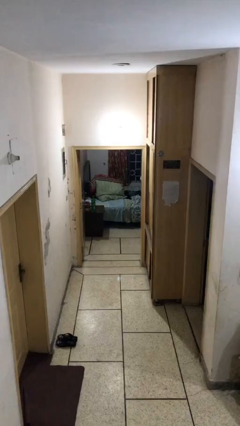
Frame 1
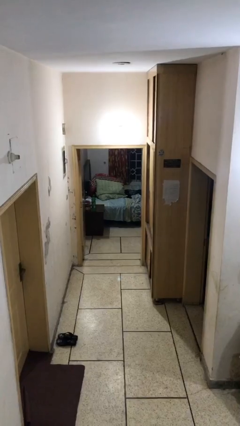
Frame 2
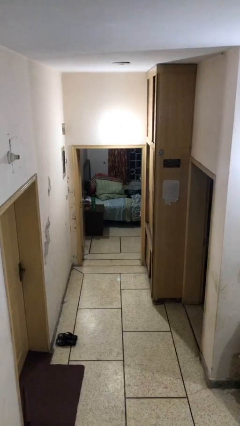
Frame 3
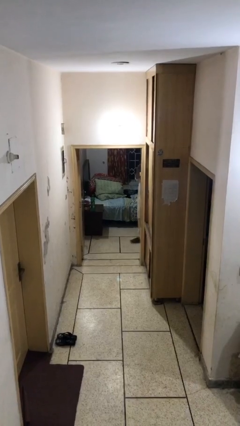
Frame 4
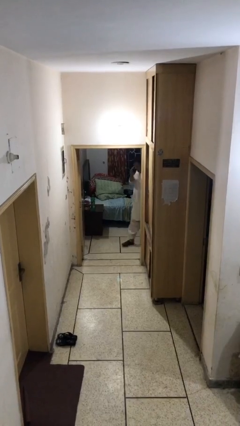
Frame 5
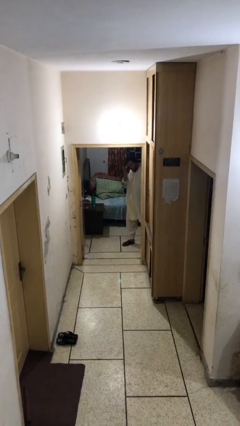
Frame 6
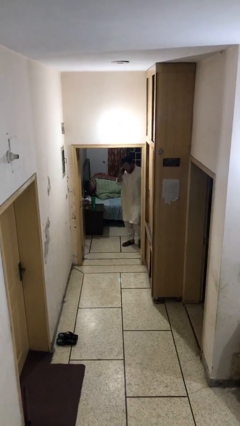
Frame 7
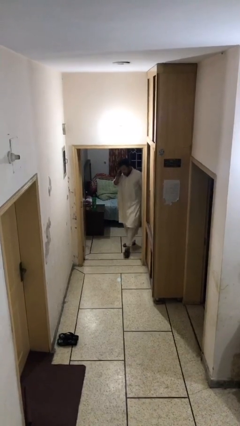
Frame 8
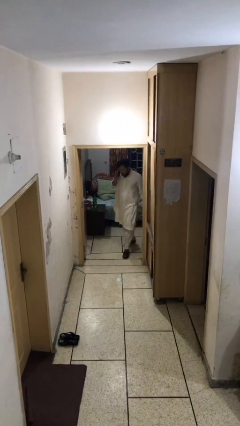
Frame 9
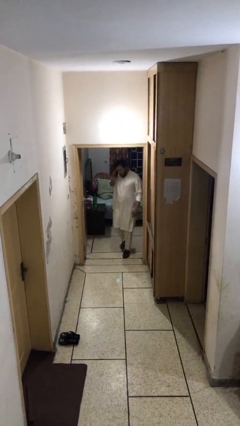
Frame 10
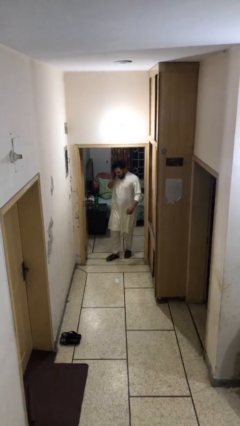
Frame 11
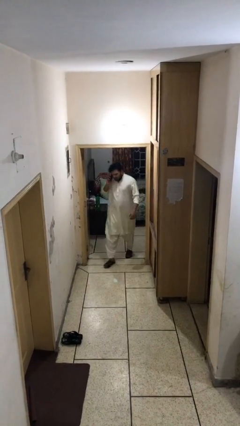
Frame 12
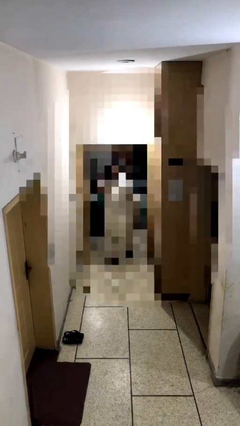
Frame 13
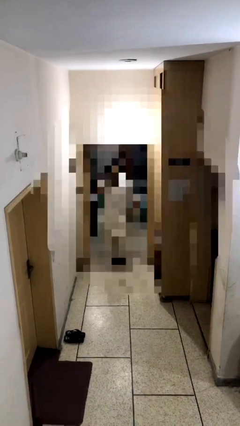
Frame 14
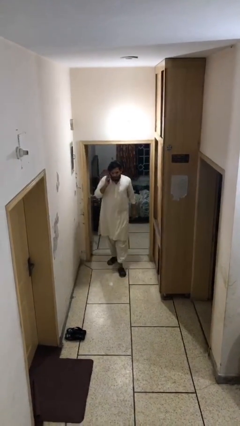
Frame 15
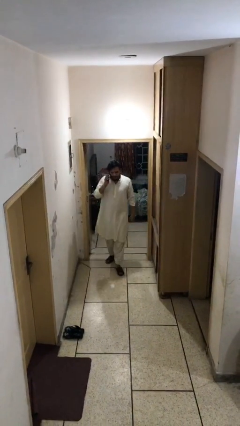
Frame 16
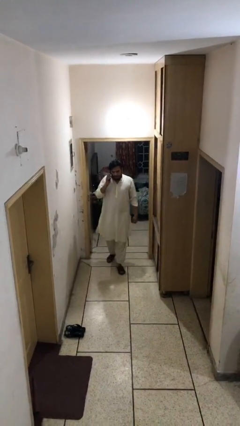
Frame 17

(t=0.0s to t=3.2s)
person enters scene through structure

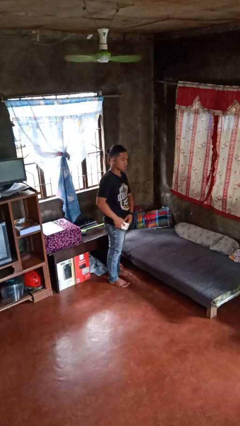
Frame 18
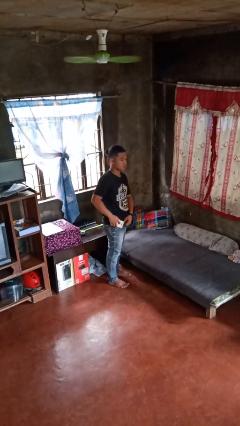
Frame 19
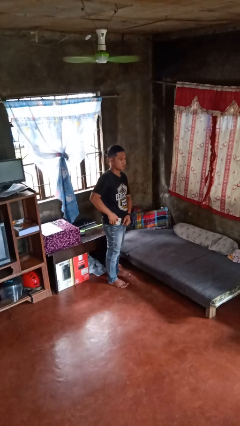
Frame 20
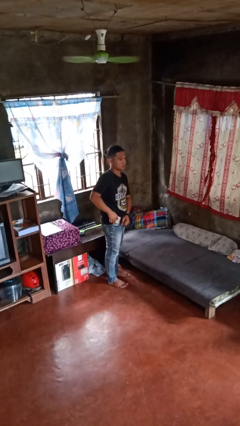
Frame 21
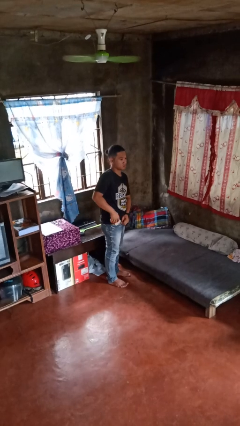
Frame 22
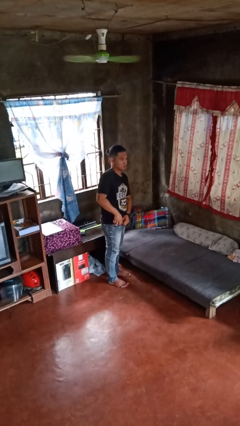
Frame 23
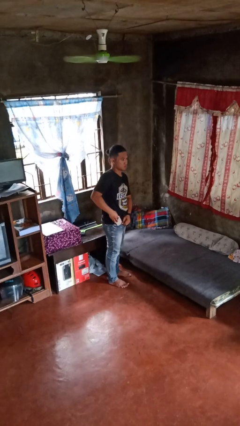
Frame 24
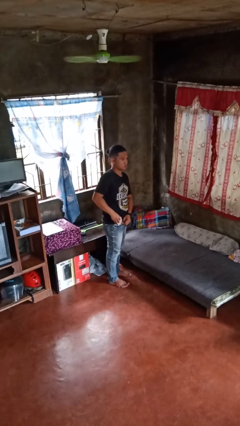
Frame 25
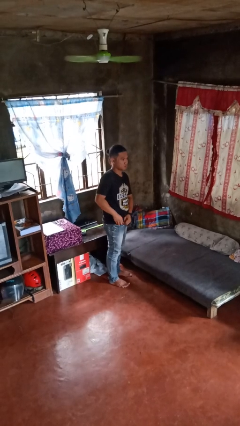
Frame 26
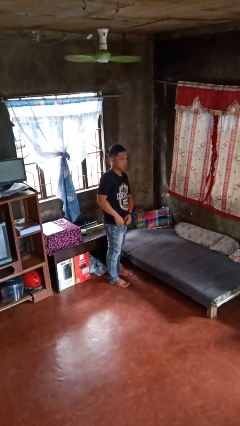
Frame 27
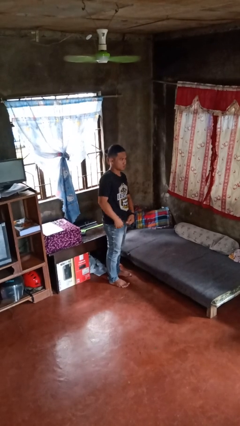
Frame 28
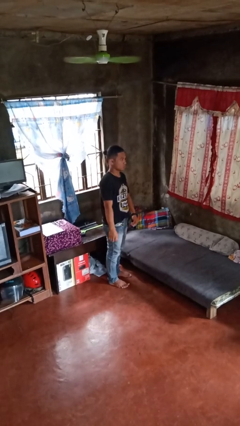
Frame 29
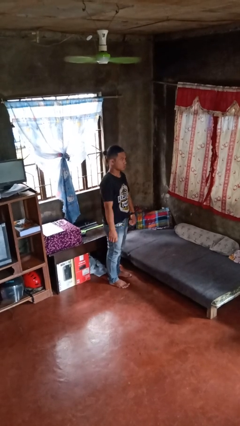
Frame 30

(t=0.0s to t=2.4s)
person puts phone into pocket

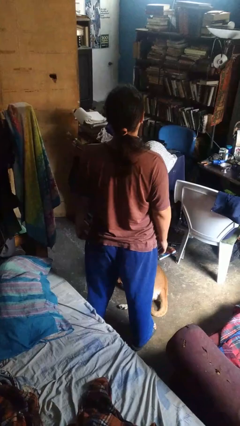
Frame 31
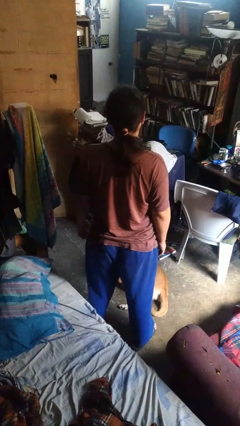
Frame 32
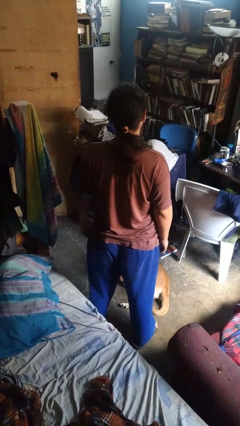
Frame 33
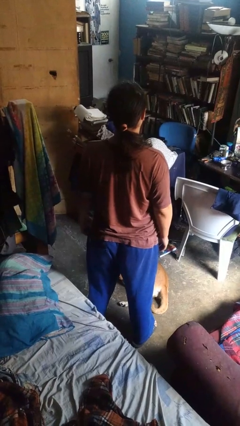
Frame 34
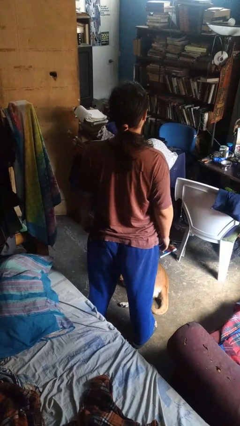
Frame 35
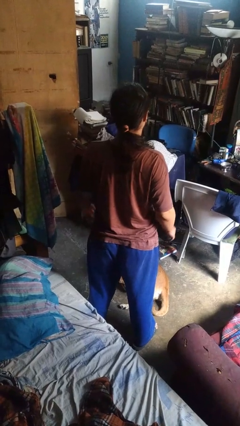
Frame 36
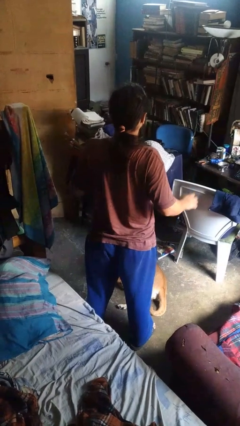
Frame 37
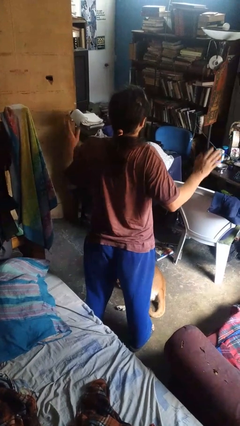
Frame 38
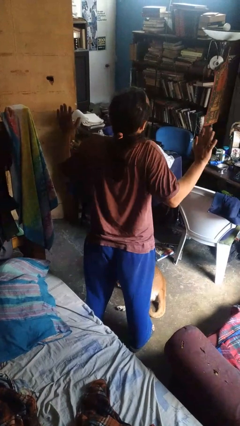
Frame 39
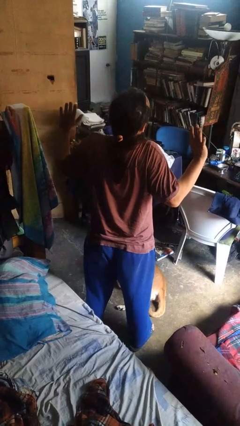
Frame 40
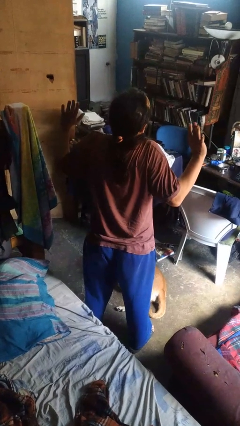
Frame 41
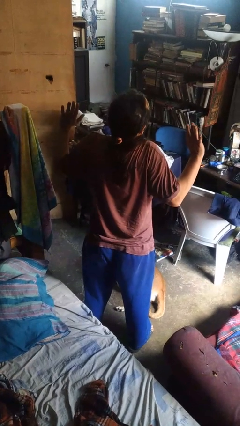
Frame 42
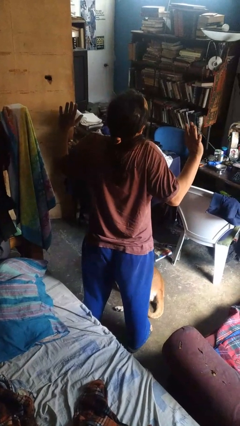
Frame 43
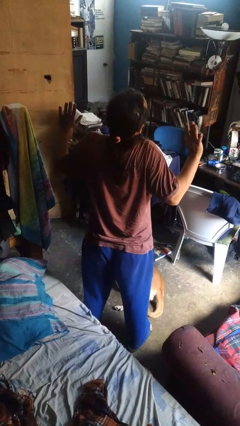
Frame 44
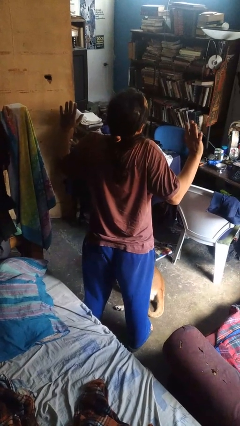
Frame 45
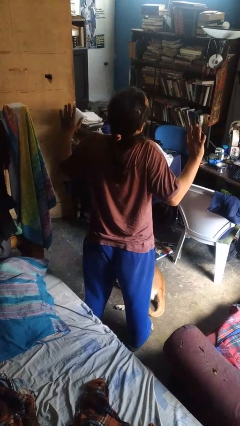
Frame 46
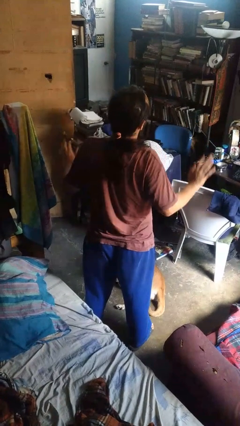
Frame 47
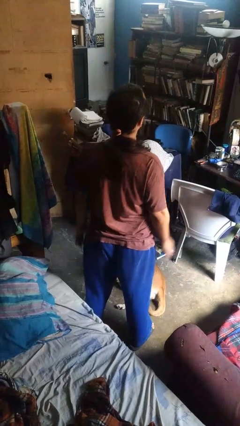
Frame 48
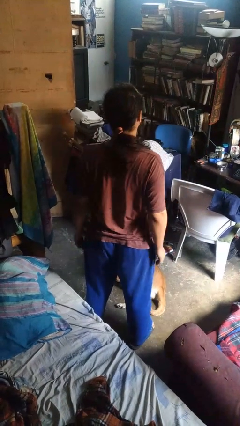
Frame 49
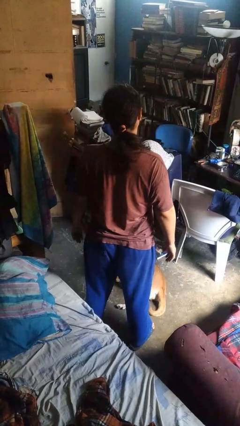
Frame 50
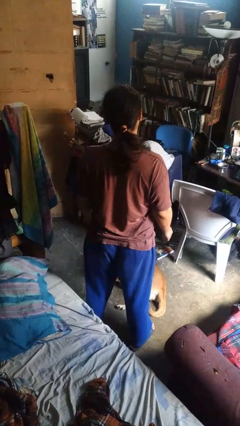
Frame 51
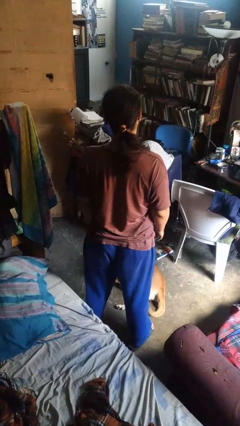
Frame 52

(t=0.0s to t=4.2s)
person shrugs

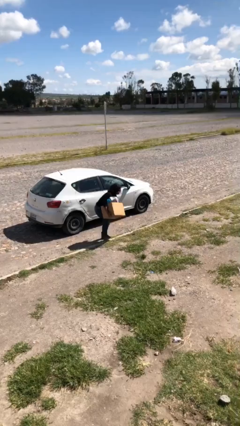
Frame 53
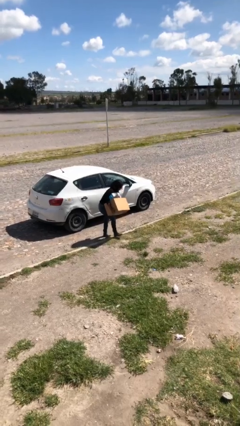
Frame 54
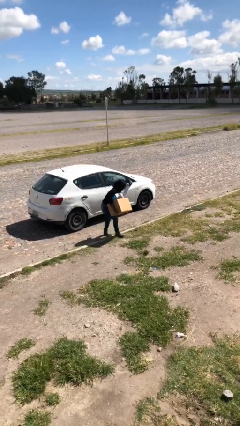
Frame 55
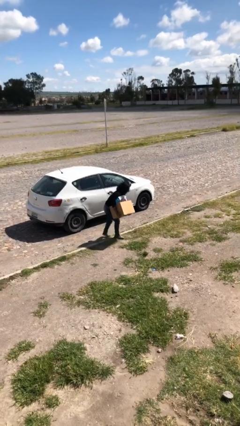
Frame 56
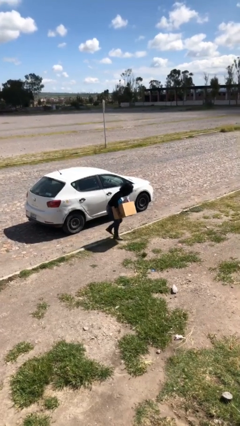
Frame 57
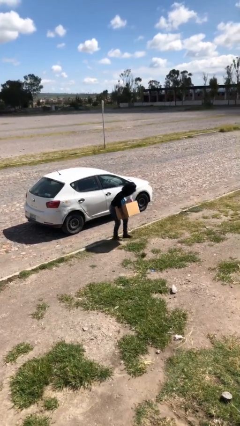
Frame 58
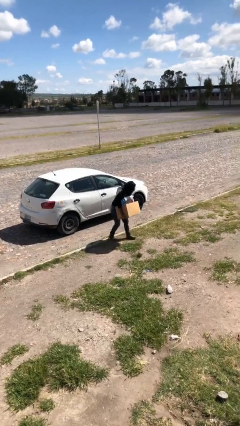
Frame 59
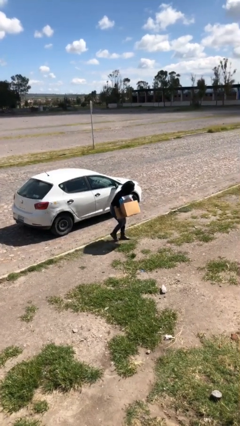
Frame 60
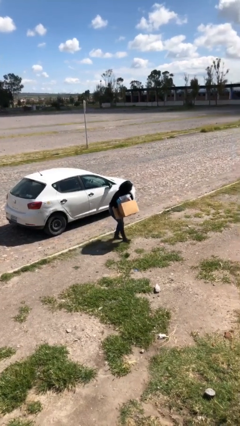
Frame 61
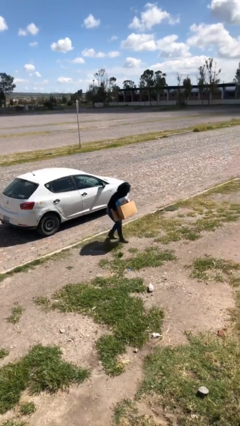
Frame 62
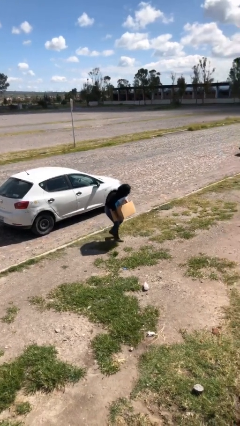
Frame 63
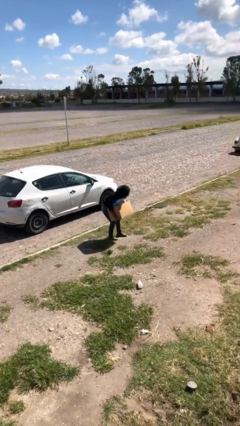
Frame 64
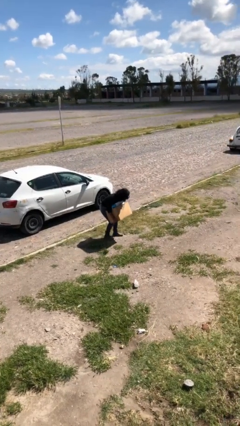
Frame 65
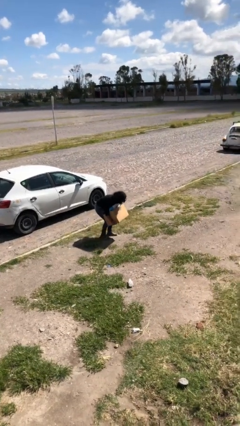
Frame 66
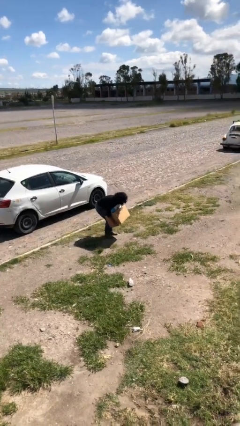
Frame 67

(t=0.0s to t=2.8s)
person carries heavy object

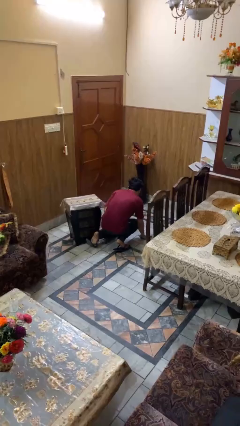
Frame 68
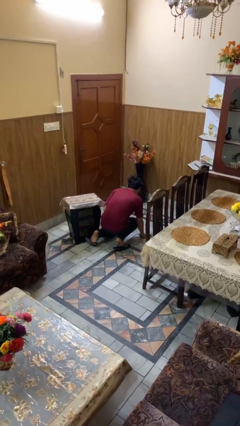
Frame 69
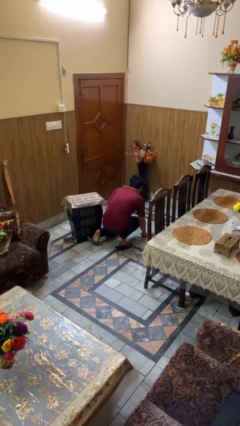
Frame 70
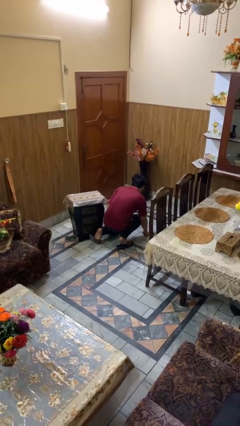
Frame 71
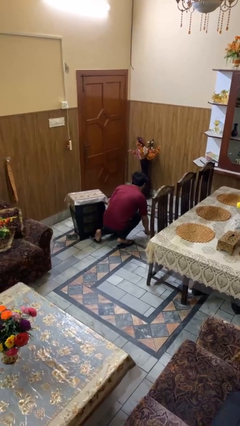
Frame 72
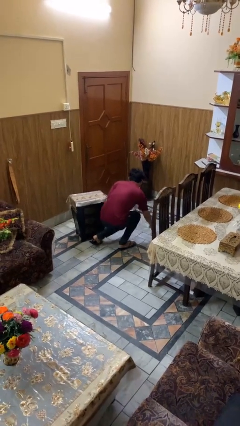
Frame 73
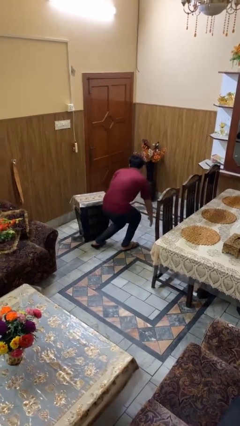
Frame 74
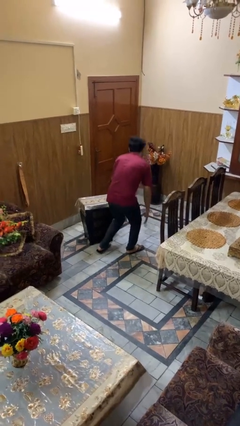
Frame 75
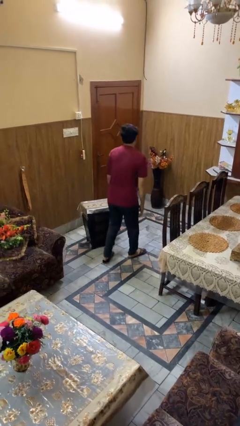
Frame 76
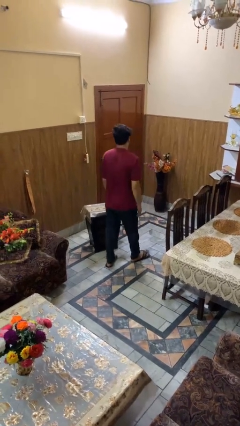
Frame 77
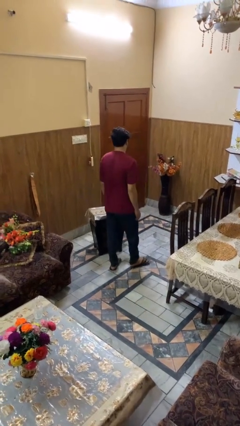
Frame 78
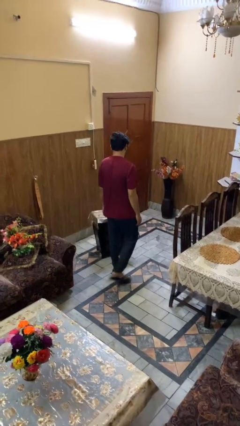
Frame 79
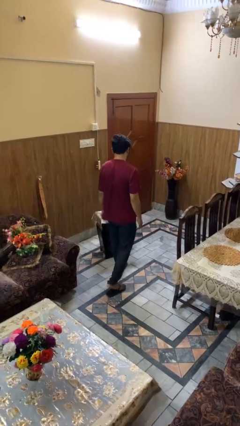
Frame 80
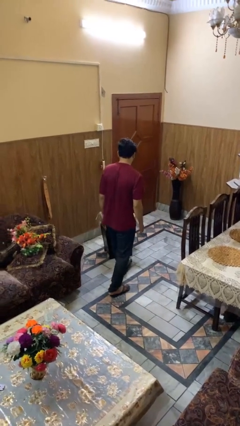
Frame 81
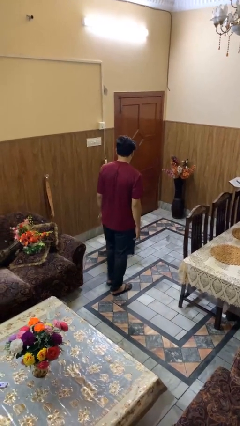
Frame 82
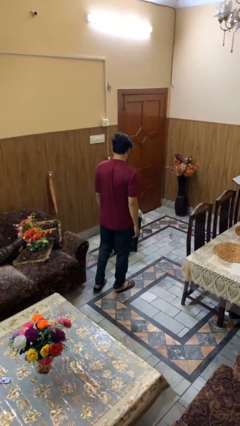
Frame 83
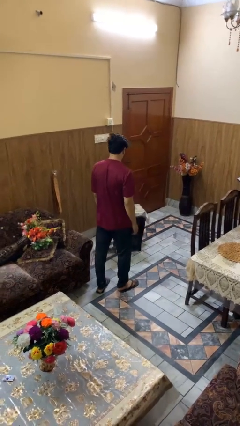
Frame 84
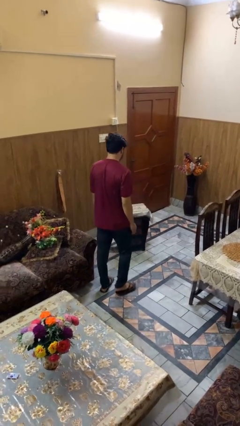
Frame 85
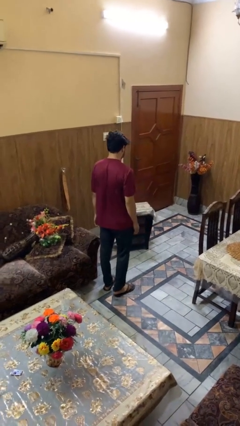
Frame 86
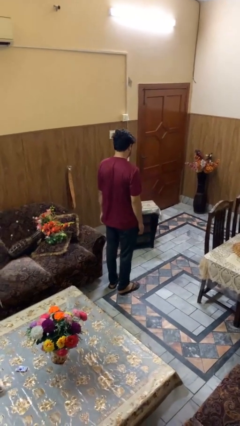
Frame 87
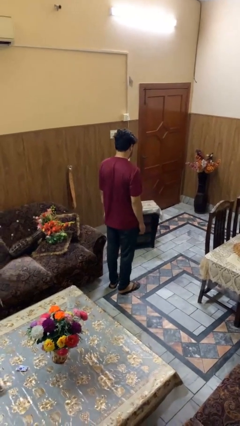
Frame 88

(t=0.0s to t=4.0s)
person stands up from floor

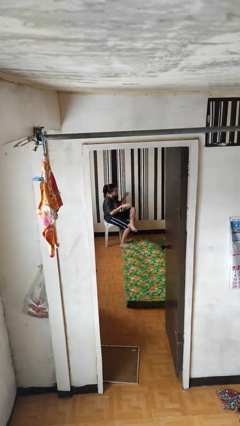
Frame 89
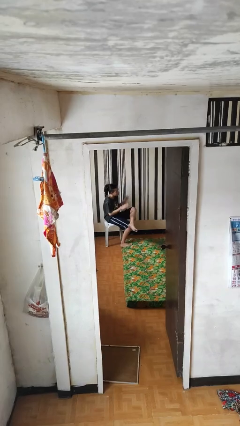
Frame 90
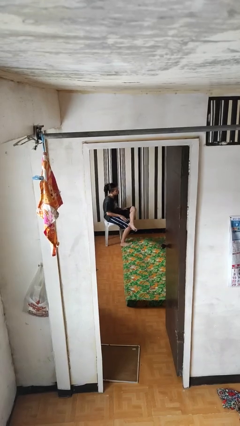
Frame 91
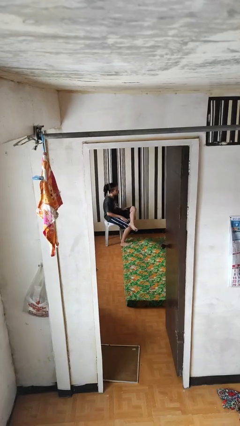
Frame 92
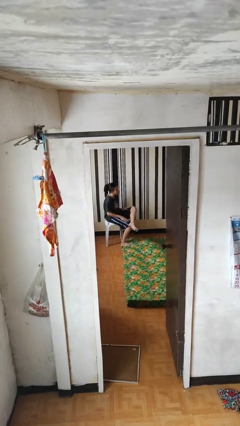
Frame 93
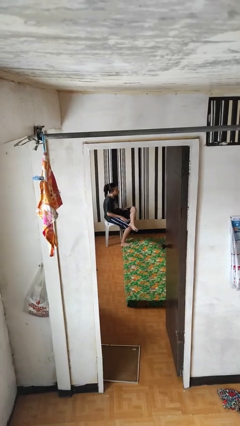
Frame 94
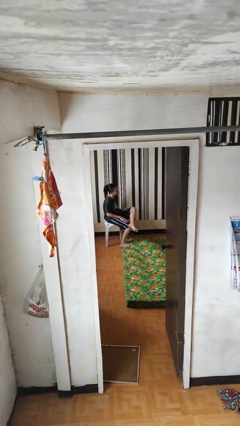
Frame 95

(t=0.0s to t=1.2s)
person slaps hands on thighs
